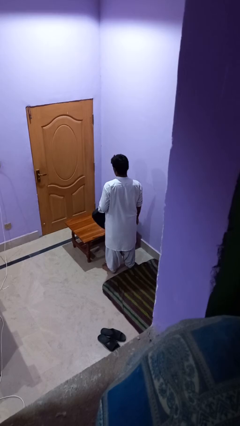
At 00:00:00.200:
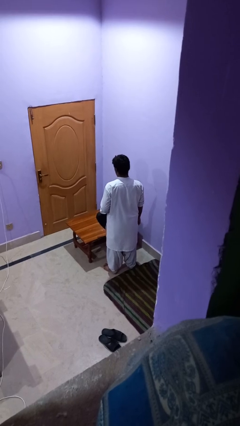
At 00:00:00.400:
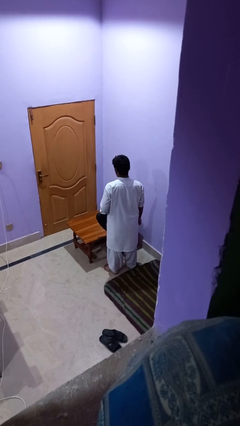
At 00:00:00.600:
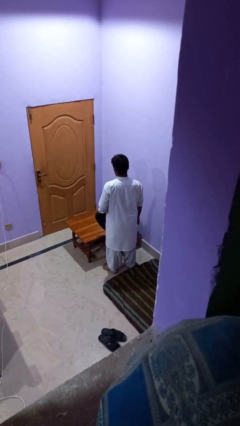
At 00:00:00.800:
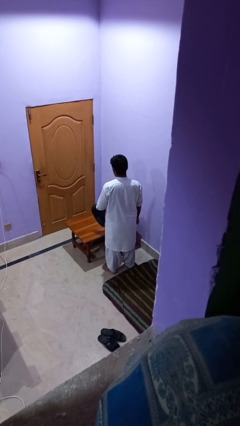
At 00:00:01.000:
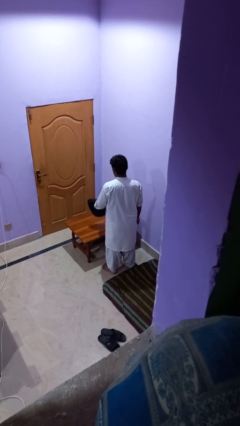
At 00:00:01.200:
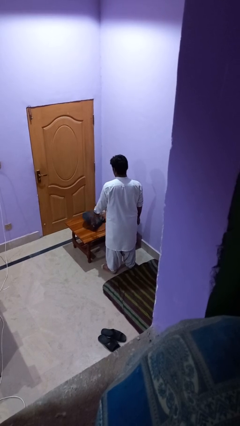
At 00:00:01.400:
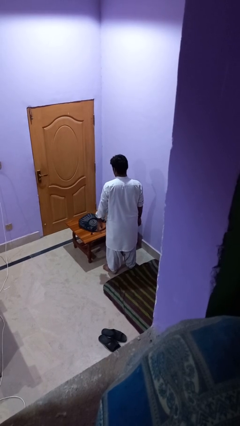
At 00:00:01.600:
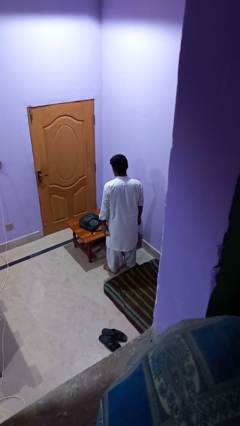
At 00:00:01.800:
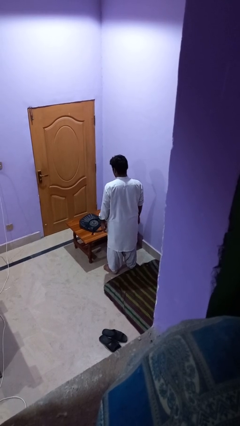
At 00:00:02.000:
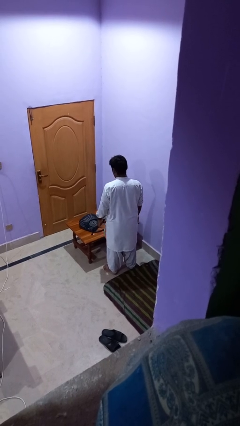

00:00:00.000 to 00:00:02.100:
person throws object on table

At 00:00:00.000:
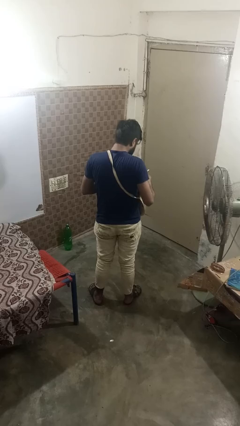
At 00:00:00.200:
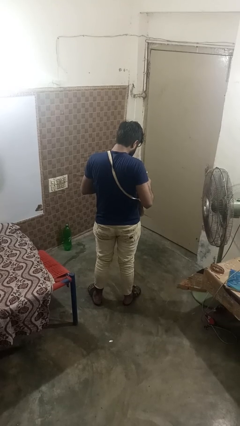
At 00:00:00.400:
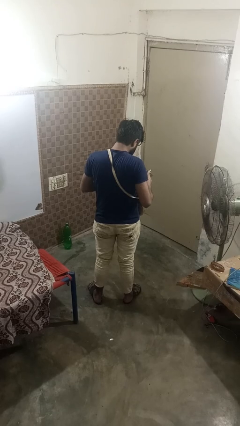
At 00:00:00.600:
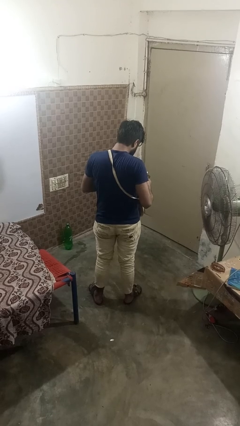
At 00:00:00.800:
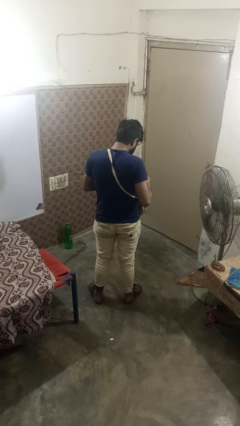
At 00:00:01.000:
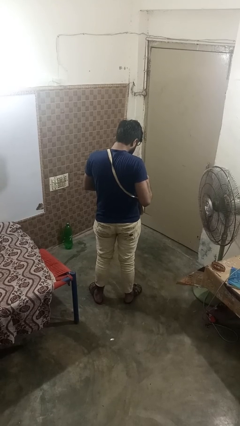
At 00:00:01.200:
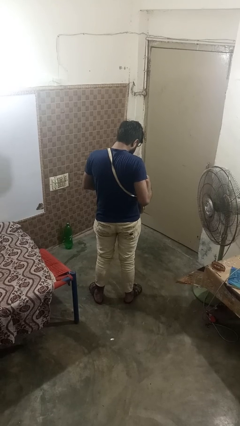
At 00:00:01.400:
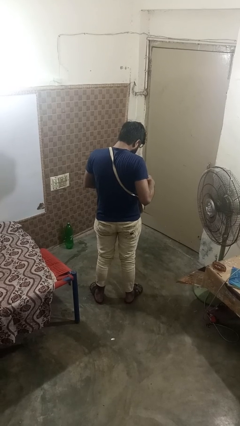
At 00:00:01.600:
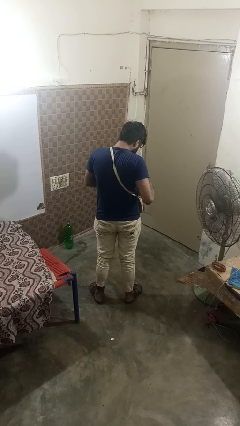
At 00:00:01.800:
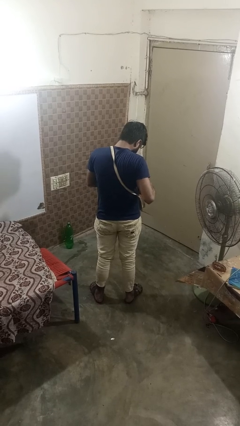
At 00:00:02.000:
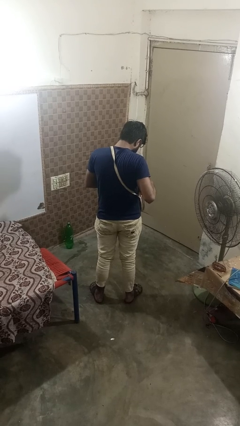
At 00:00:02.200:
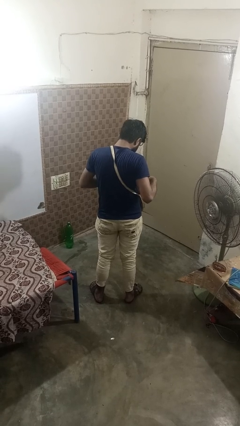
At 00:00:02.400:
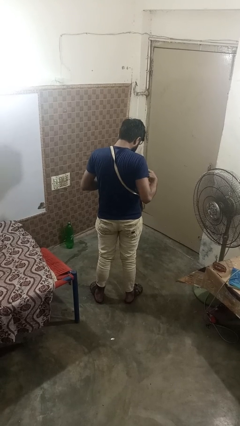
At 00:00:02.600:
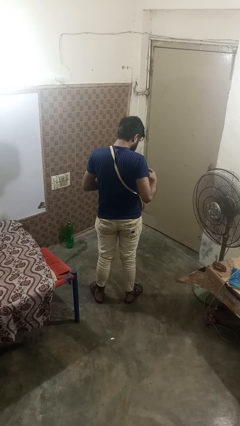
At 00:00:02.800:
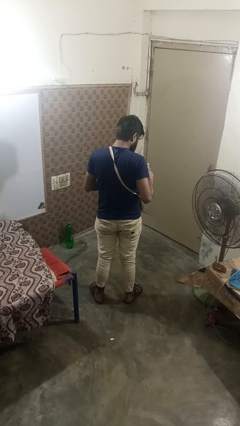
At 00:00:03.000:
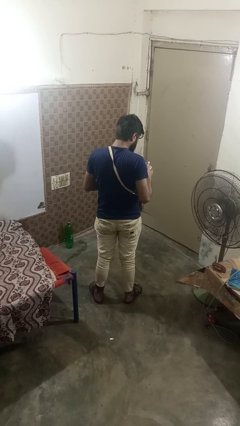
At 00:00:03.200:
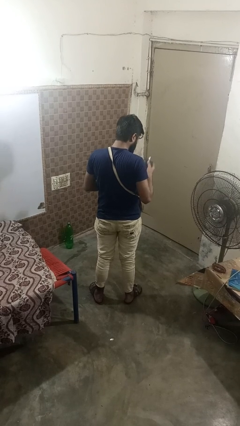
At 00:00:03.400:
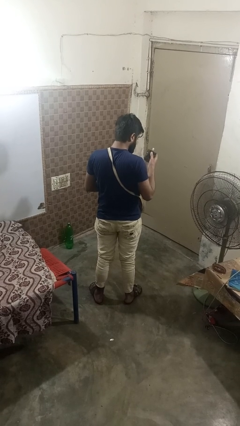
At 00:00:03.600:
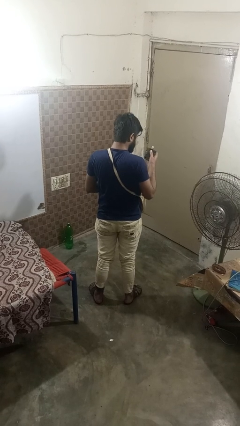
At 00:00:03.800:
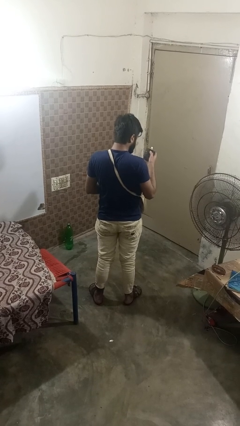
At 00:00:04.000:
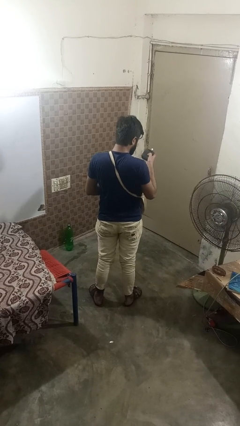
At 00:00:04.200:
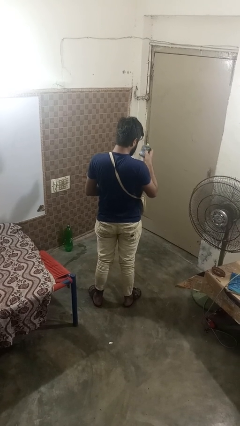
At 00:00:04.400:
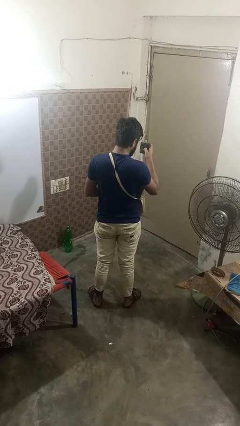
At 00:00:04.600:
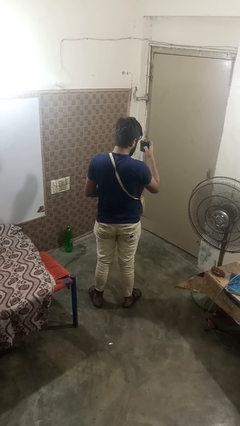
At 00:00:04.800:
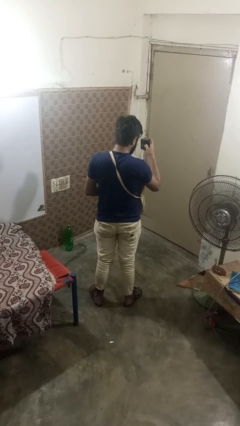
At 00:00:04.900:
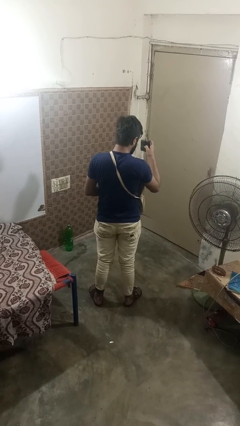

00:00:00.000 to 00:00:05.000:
person takes object from purse

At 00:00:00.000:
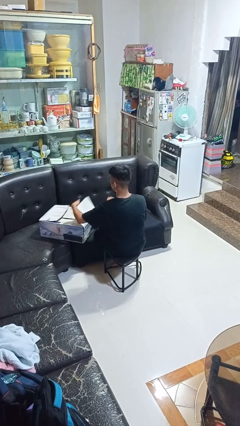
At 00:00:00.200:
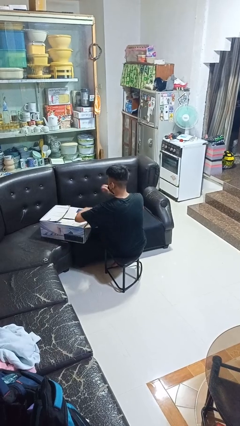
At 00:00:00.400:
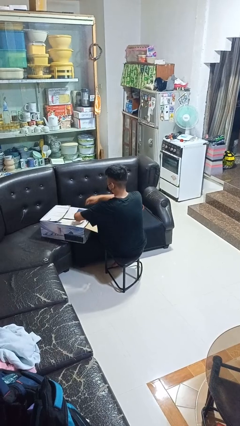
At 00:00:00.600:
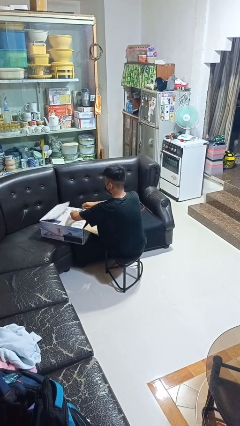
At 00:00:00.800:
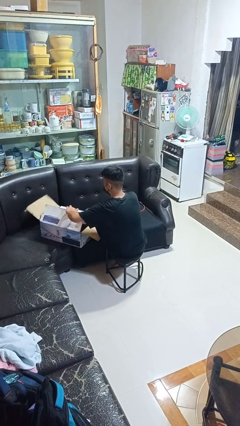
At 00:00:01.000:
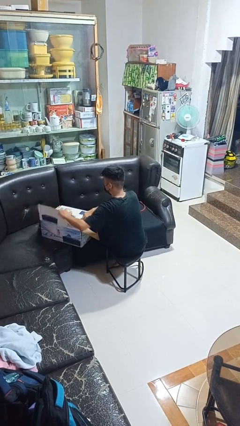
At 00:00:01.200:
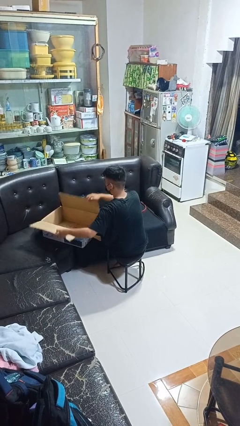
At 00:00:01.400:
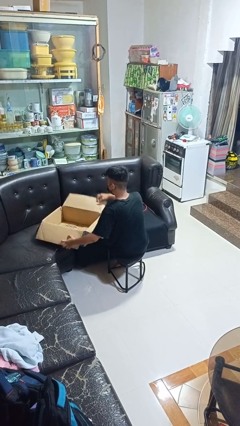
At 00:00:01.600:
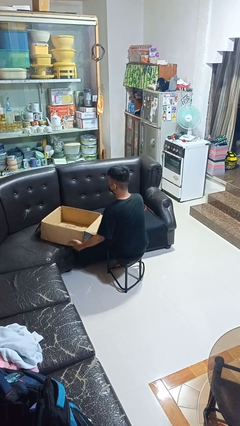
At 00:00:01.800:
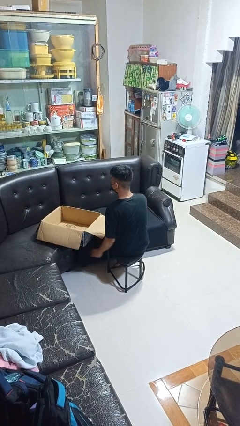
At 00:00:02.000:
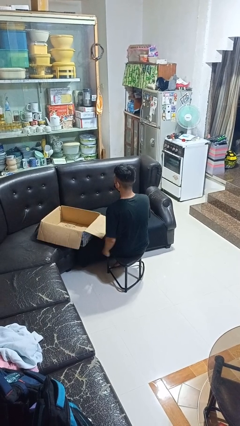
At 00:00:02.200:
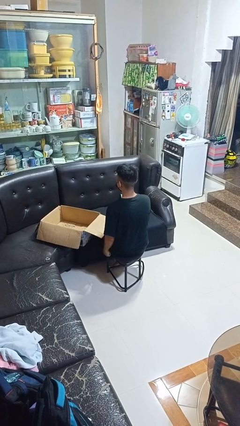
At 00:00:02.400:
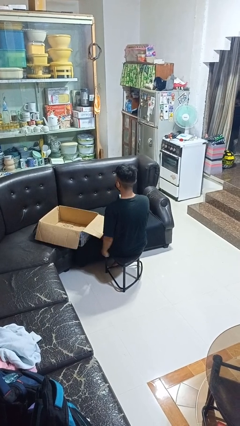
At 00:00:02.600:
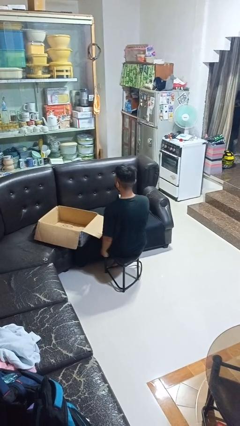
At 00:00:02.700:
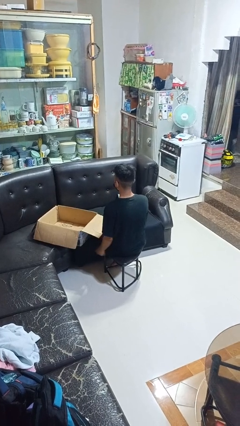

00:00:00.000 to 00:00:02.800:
person opens box

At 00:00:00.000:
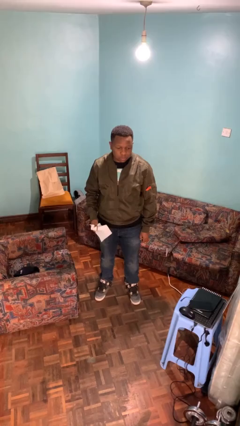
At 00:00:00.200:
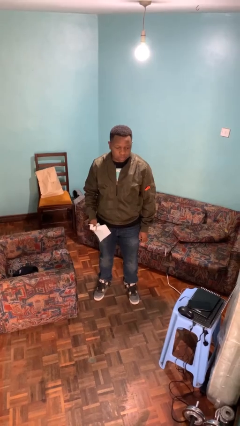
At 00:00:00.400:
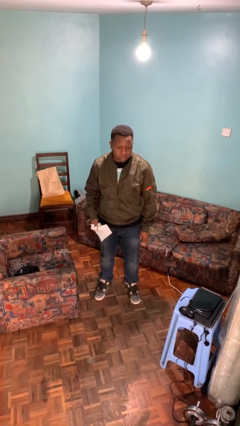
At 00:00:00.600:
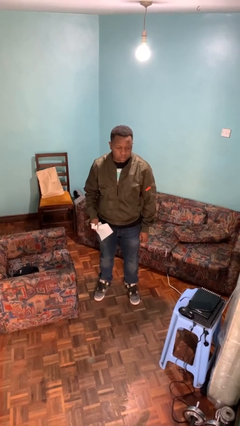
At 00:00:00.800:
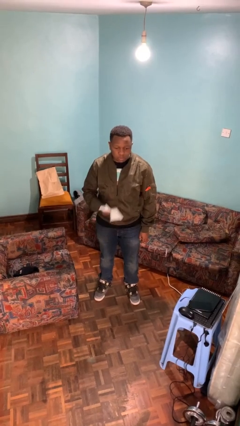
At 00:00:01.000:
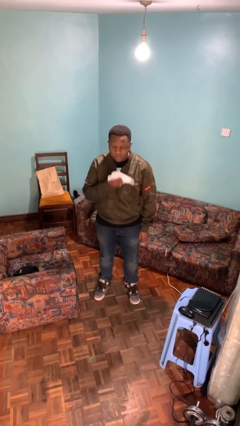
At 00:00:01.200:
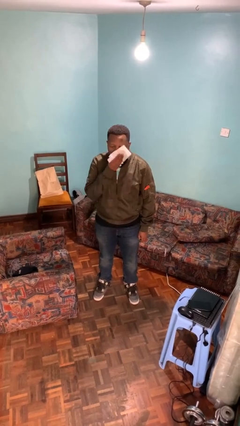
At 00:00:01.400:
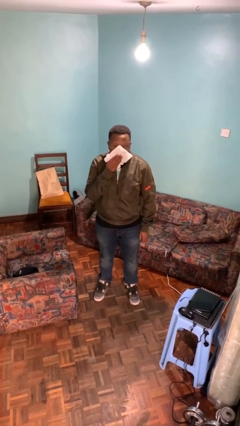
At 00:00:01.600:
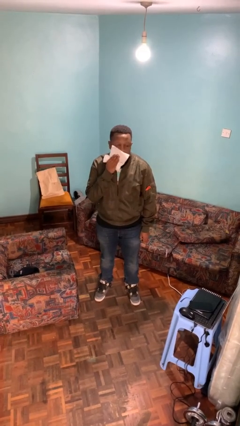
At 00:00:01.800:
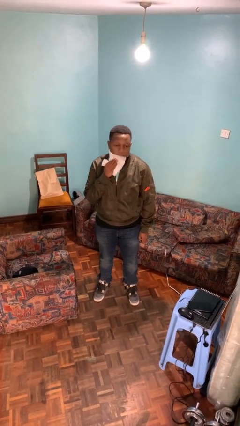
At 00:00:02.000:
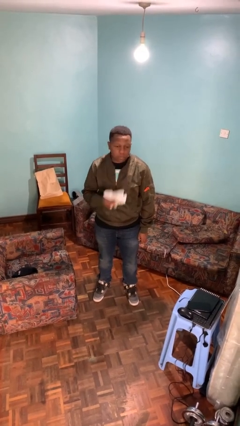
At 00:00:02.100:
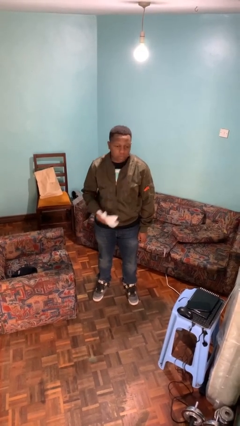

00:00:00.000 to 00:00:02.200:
person wipes mouth with napkin

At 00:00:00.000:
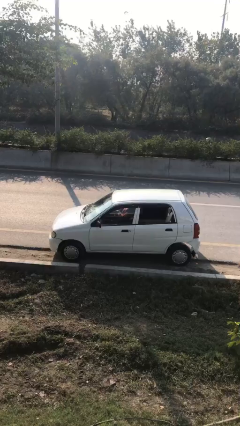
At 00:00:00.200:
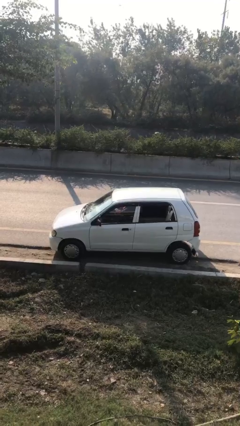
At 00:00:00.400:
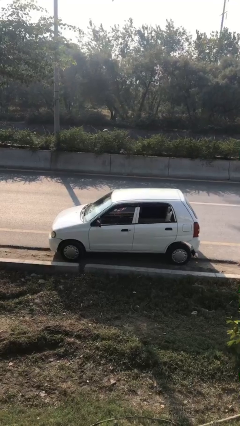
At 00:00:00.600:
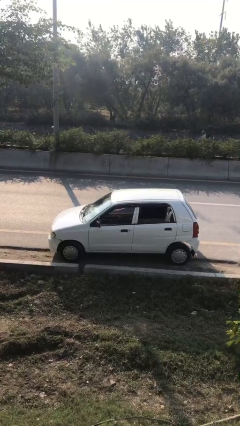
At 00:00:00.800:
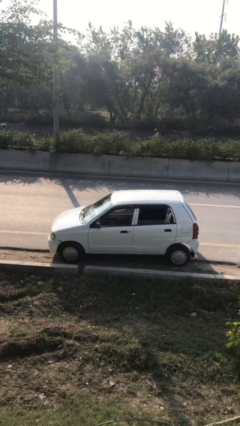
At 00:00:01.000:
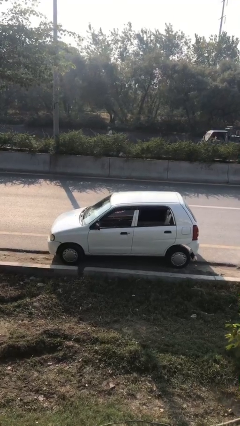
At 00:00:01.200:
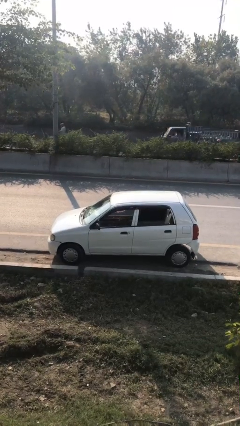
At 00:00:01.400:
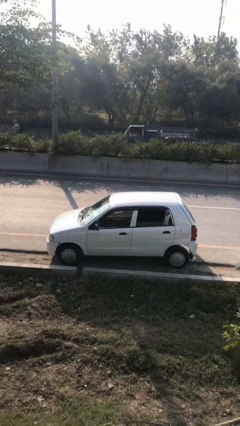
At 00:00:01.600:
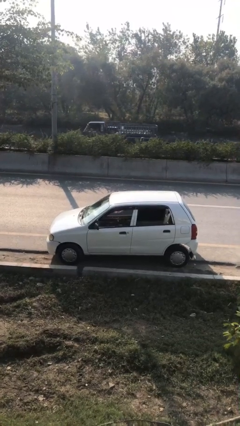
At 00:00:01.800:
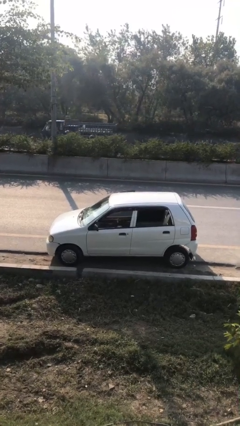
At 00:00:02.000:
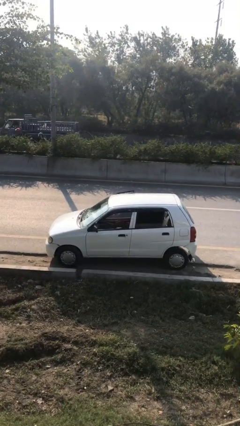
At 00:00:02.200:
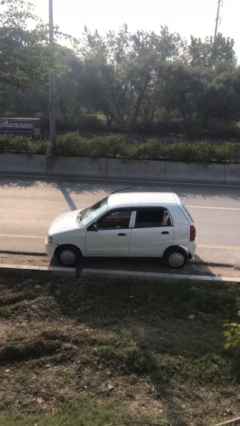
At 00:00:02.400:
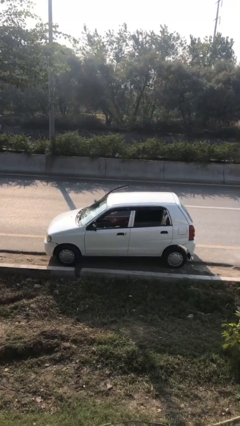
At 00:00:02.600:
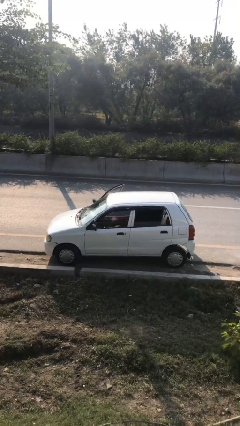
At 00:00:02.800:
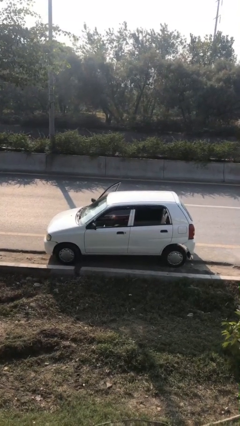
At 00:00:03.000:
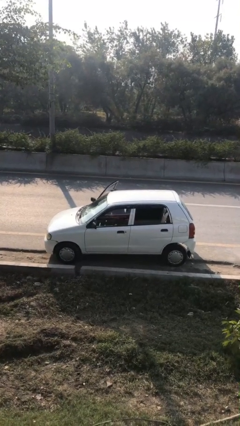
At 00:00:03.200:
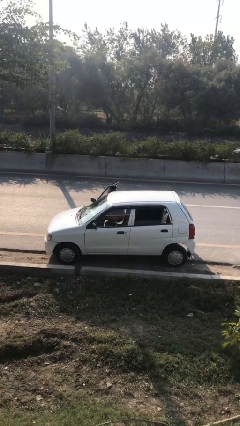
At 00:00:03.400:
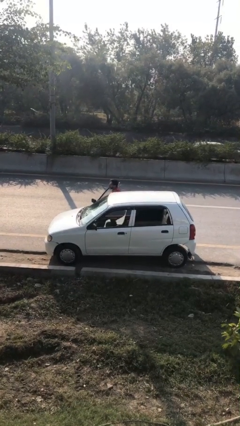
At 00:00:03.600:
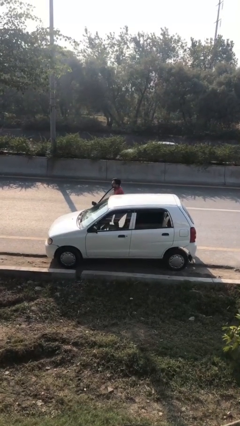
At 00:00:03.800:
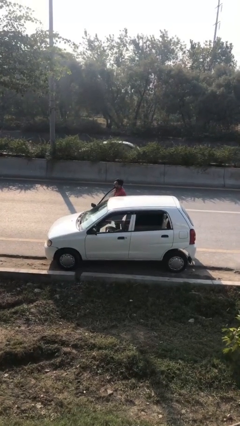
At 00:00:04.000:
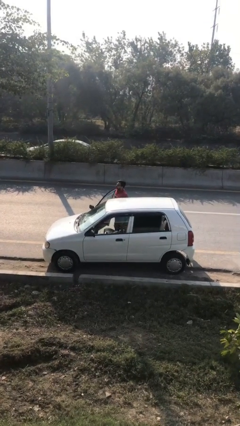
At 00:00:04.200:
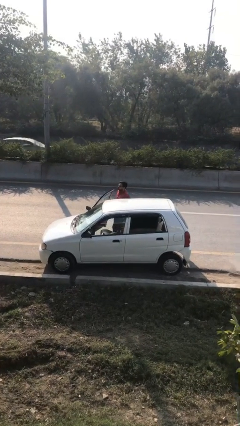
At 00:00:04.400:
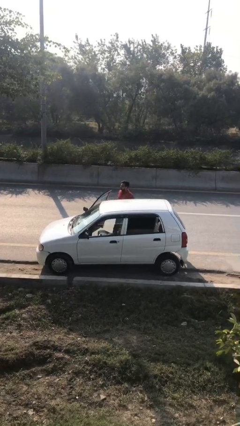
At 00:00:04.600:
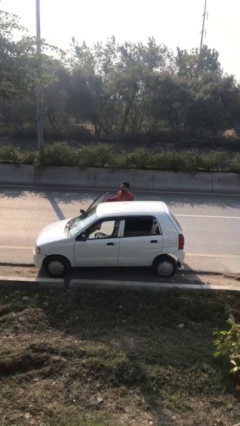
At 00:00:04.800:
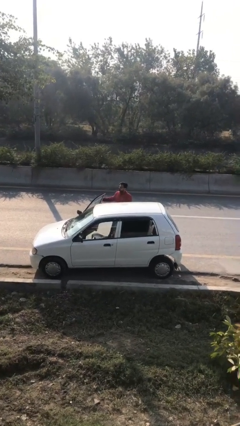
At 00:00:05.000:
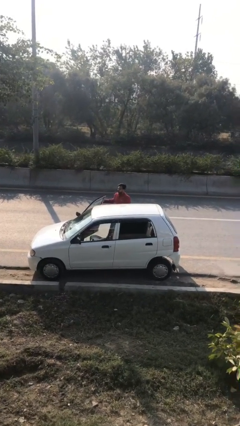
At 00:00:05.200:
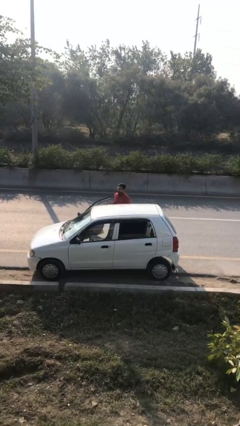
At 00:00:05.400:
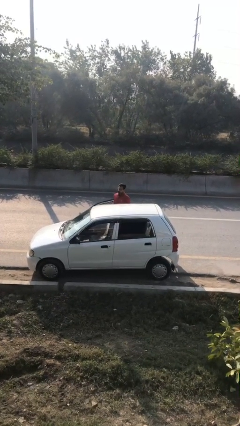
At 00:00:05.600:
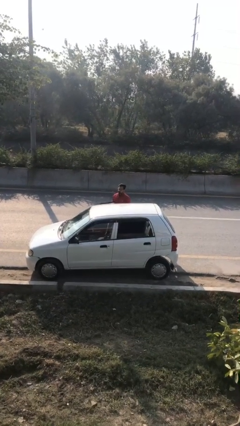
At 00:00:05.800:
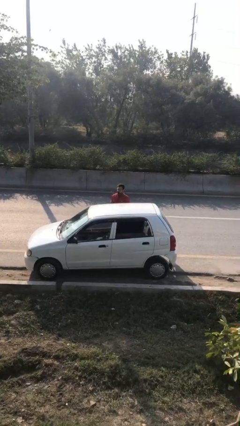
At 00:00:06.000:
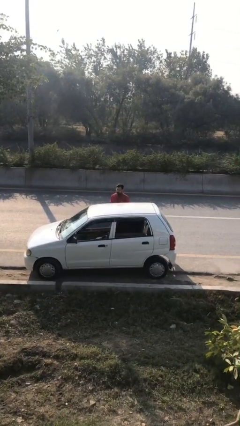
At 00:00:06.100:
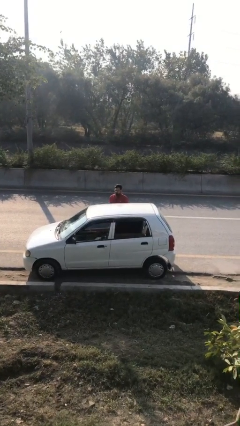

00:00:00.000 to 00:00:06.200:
person exits car
